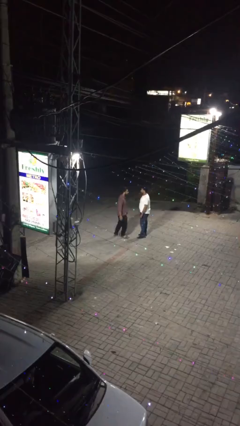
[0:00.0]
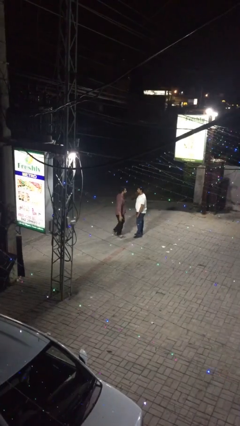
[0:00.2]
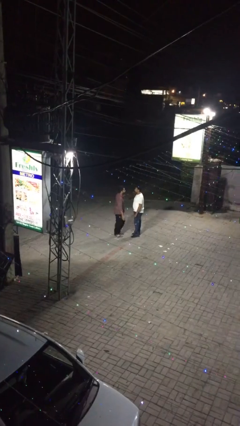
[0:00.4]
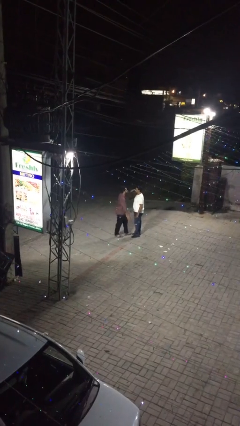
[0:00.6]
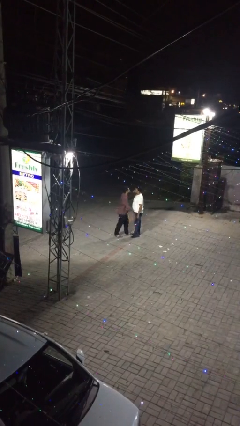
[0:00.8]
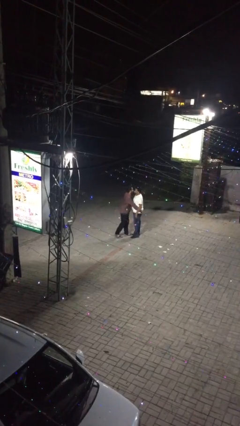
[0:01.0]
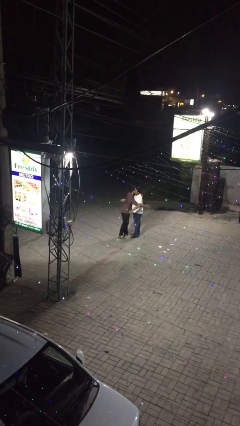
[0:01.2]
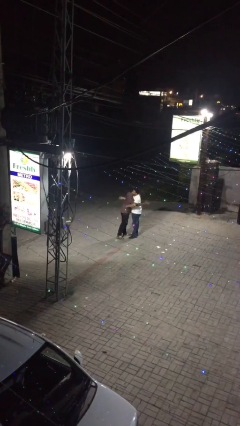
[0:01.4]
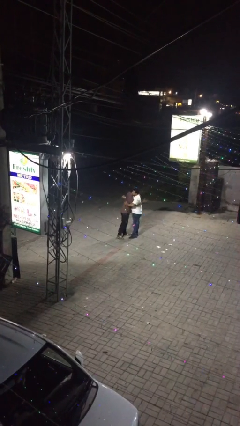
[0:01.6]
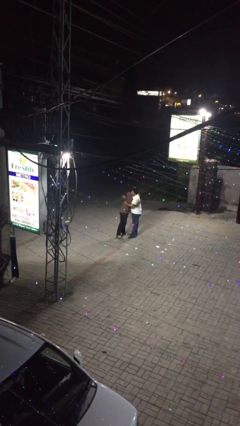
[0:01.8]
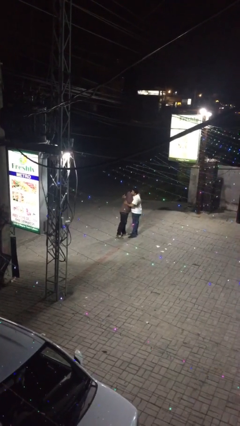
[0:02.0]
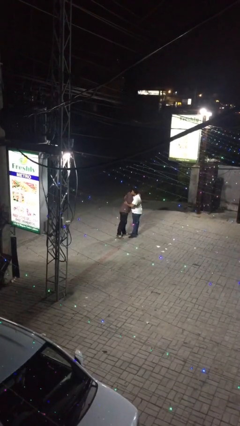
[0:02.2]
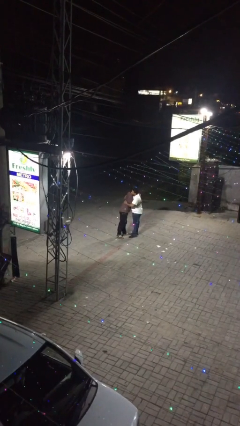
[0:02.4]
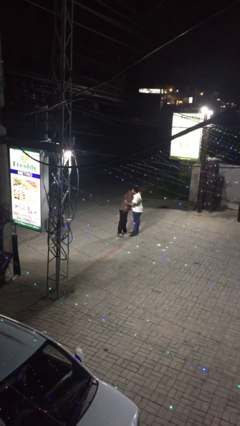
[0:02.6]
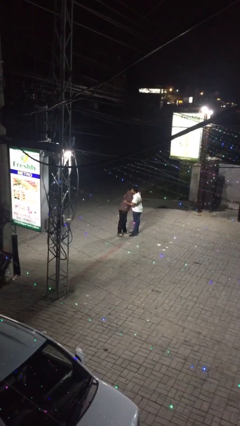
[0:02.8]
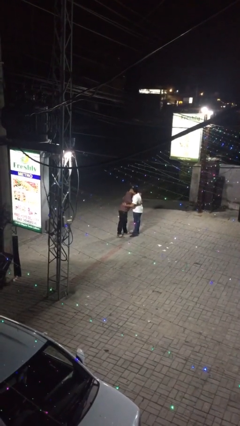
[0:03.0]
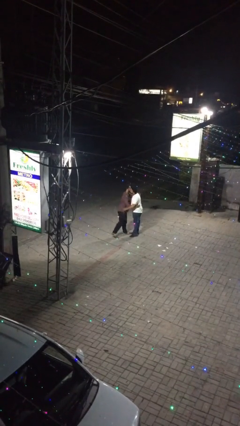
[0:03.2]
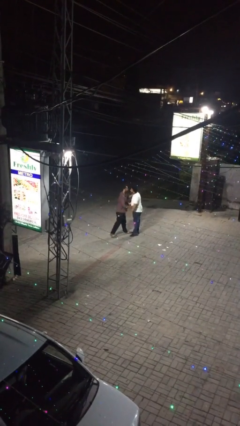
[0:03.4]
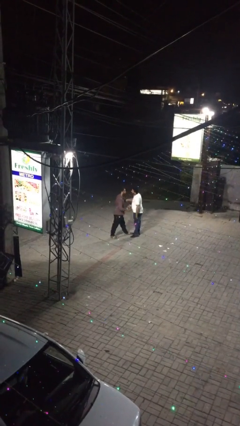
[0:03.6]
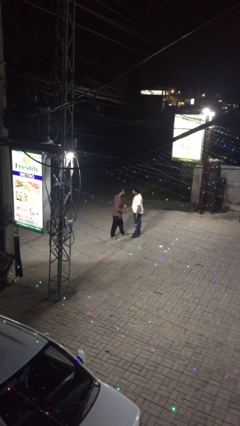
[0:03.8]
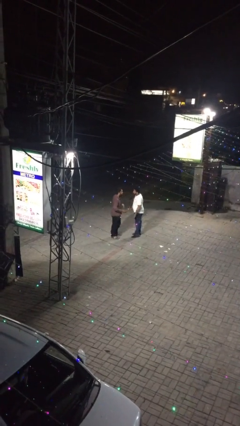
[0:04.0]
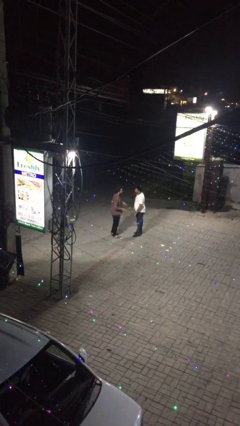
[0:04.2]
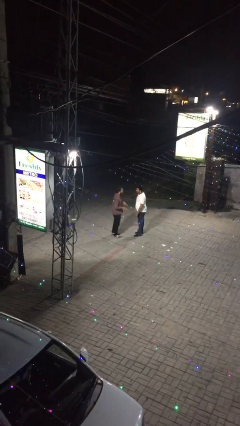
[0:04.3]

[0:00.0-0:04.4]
person embraces person

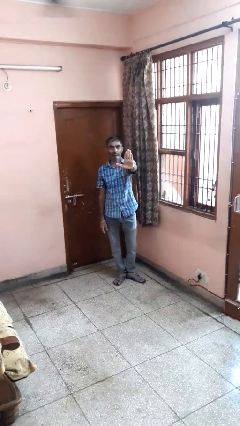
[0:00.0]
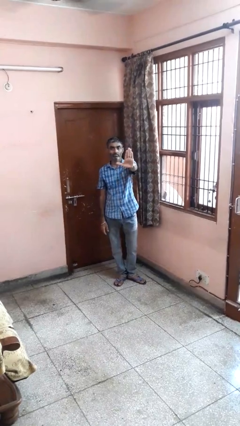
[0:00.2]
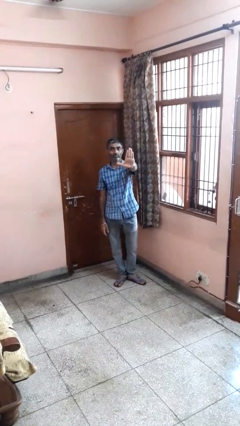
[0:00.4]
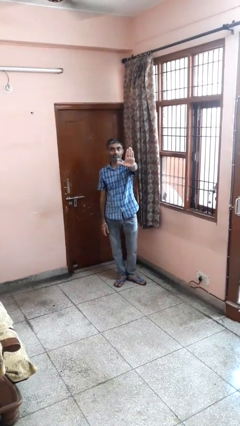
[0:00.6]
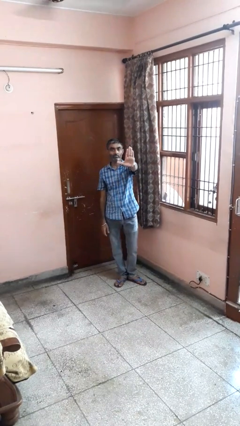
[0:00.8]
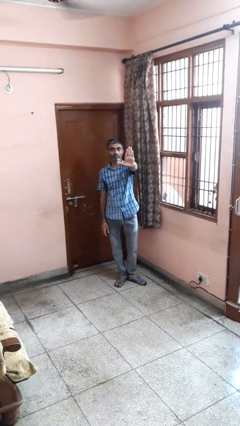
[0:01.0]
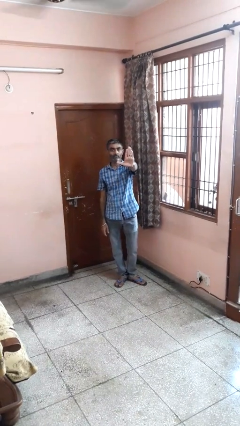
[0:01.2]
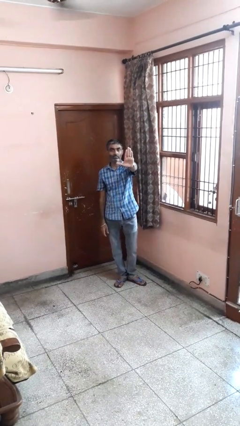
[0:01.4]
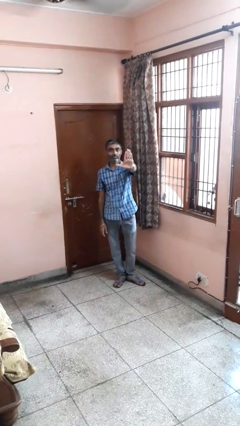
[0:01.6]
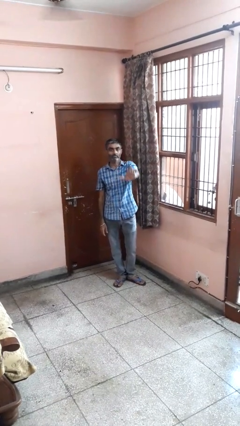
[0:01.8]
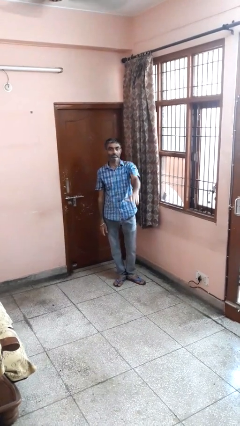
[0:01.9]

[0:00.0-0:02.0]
person gestures stop

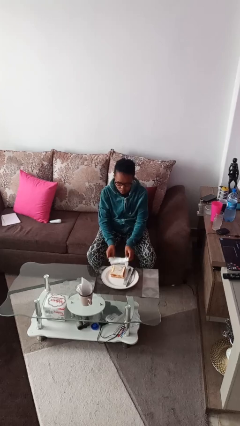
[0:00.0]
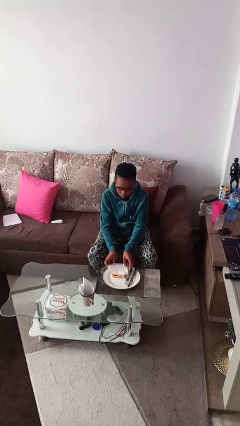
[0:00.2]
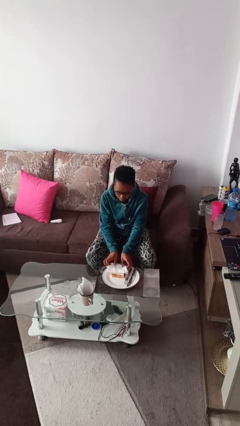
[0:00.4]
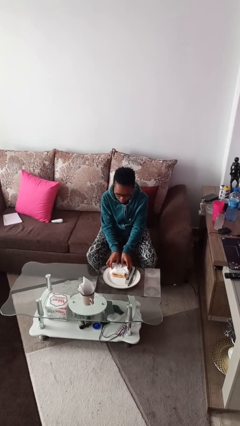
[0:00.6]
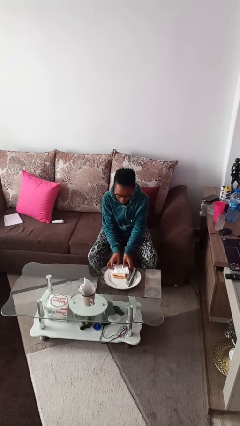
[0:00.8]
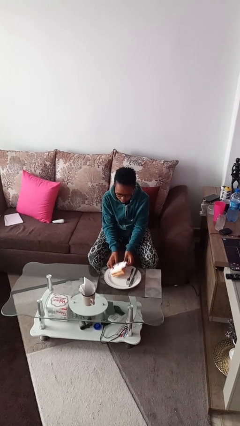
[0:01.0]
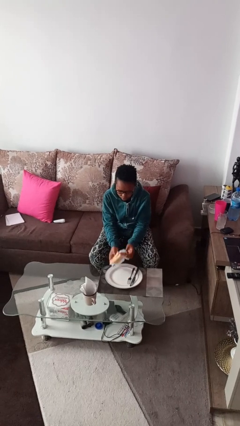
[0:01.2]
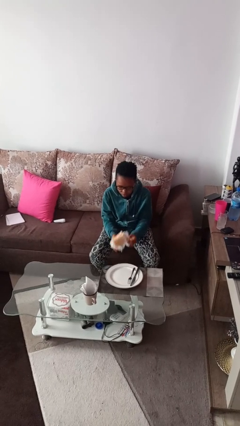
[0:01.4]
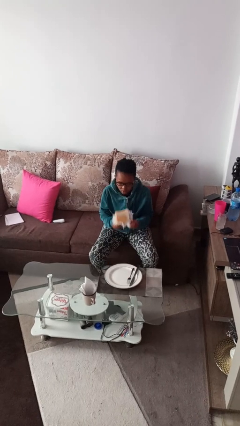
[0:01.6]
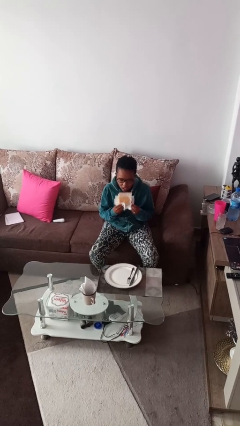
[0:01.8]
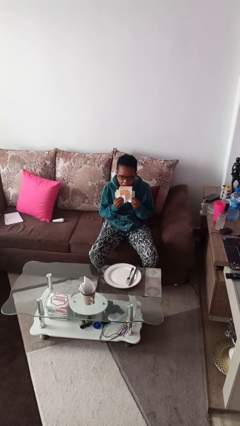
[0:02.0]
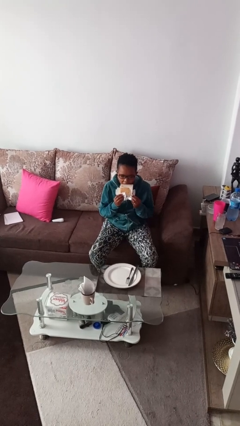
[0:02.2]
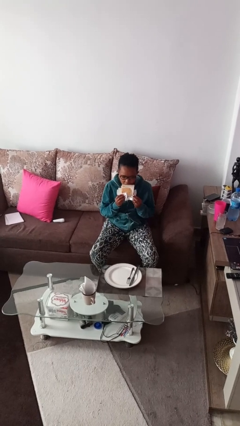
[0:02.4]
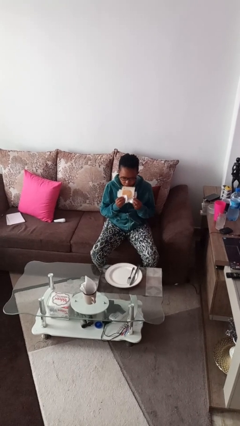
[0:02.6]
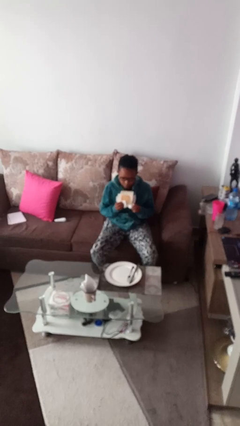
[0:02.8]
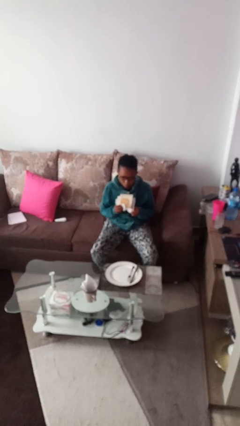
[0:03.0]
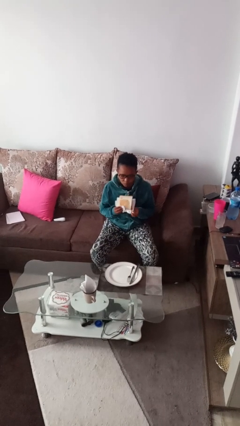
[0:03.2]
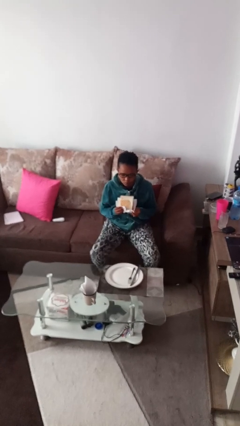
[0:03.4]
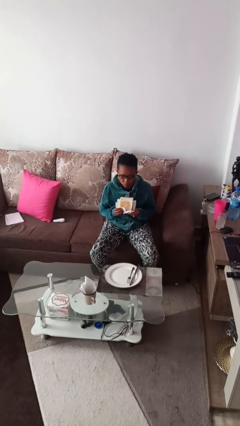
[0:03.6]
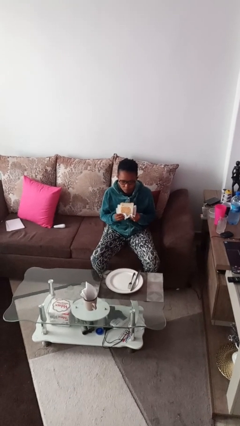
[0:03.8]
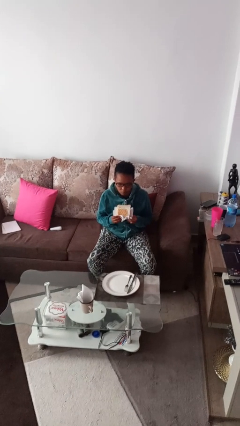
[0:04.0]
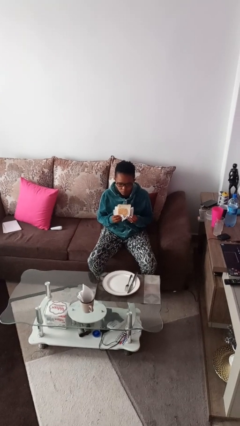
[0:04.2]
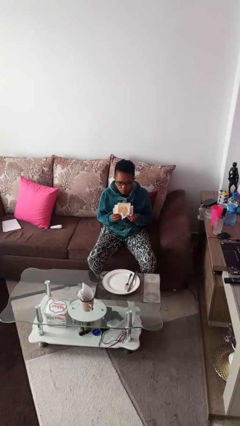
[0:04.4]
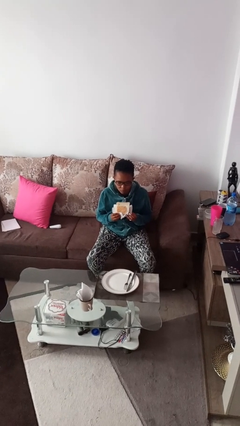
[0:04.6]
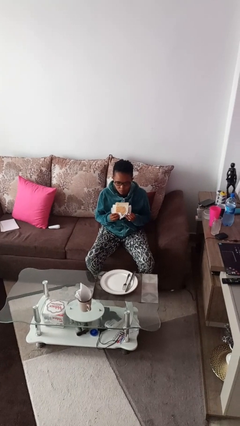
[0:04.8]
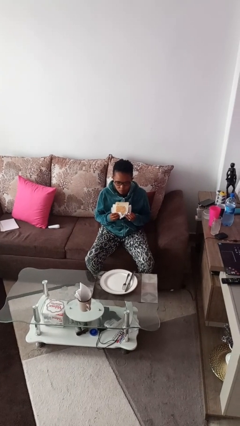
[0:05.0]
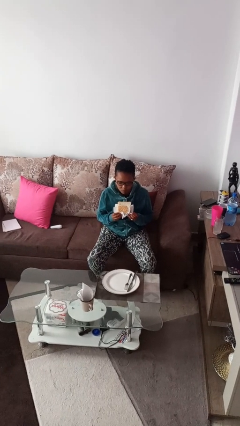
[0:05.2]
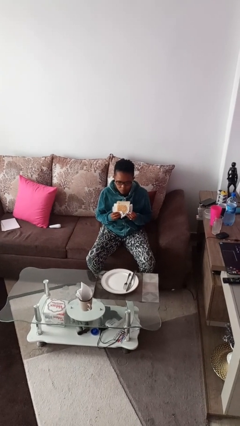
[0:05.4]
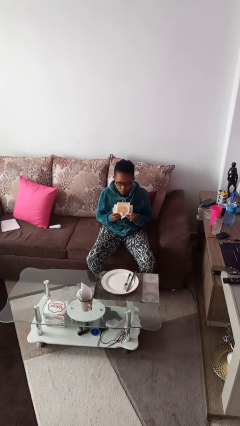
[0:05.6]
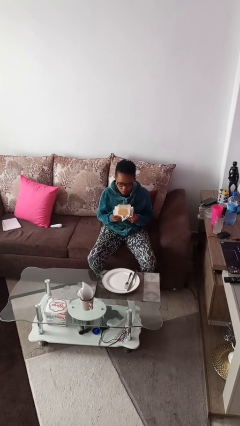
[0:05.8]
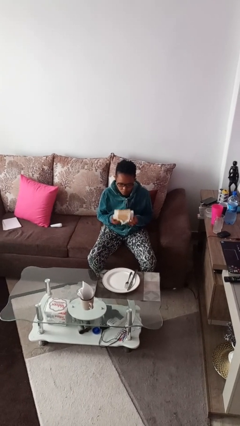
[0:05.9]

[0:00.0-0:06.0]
person eats with hands

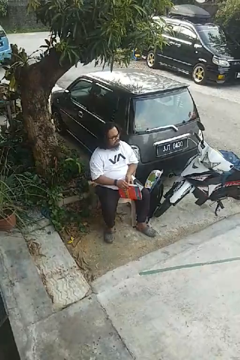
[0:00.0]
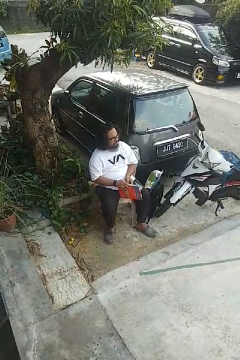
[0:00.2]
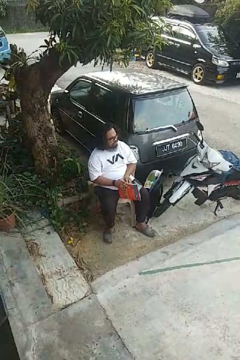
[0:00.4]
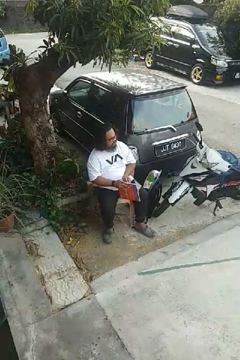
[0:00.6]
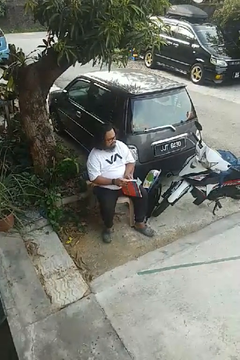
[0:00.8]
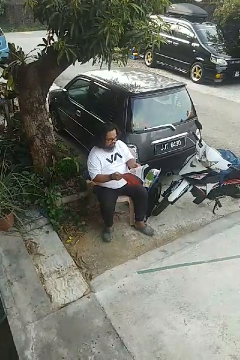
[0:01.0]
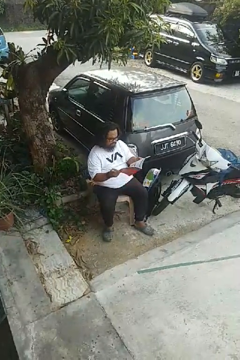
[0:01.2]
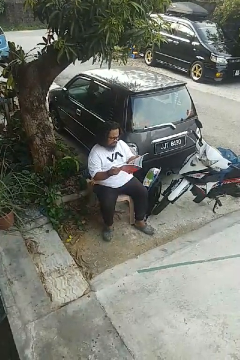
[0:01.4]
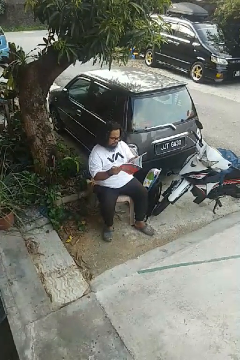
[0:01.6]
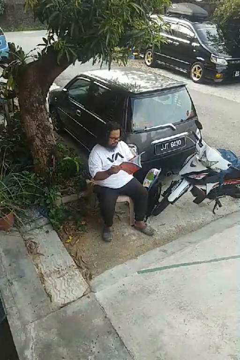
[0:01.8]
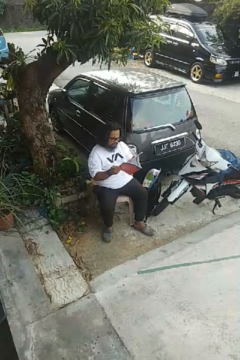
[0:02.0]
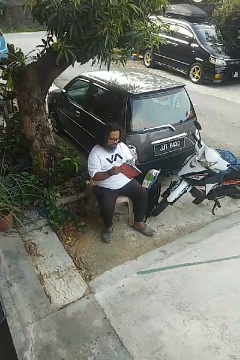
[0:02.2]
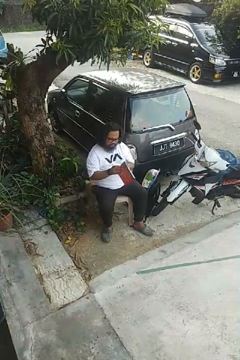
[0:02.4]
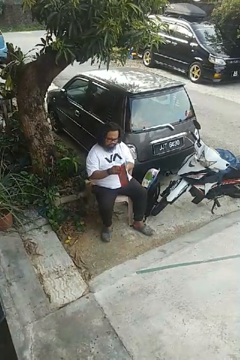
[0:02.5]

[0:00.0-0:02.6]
person reads magazine

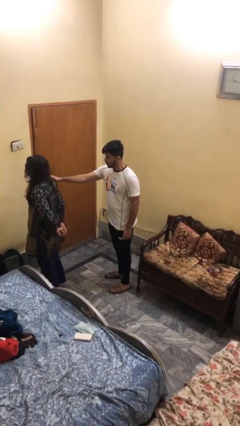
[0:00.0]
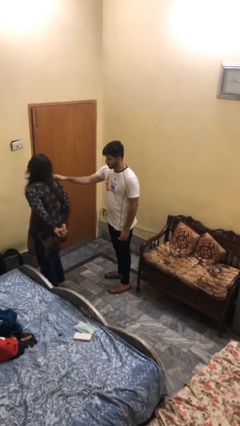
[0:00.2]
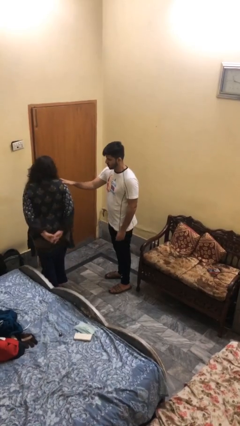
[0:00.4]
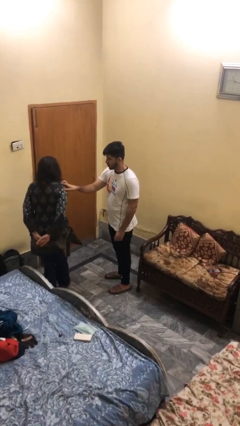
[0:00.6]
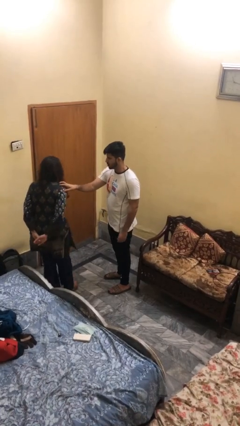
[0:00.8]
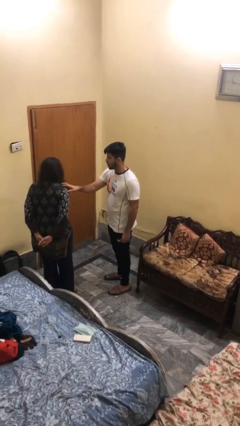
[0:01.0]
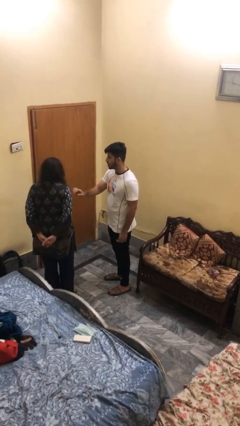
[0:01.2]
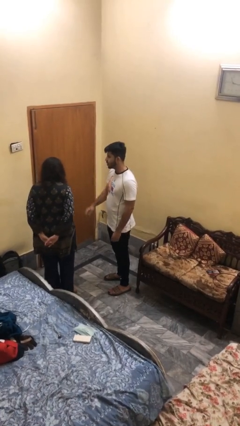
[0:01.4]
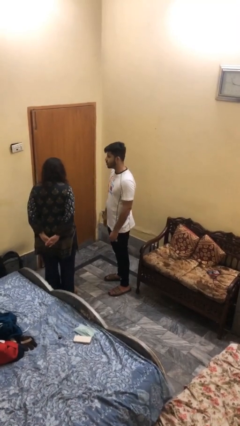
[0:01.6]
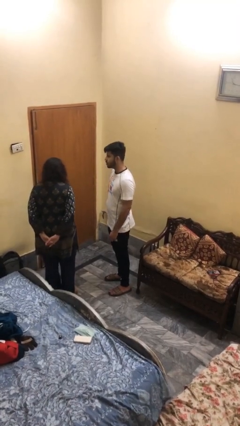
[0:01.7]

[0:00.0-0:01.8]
person spins person around

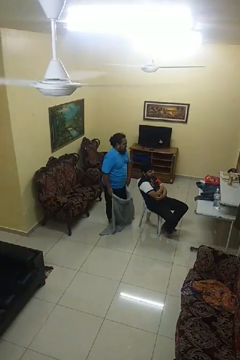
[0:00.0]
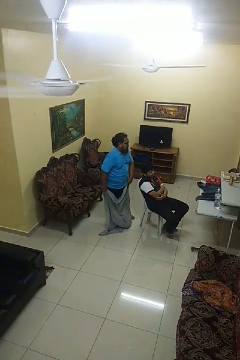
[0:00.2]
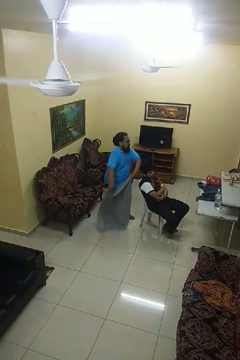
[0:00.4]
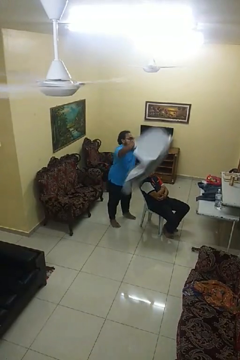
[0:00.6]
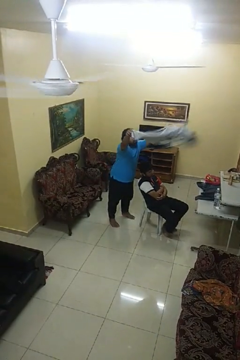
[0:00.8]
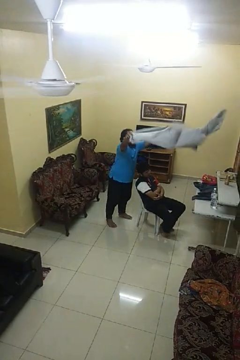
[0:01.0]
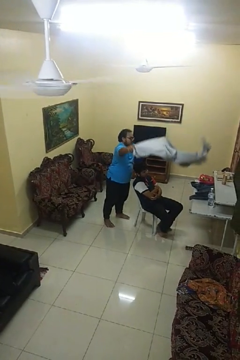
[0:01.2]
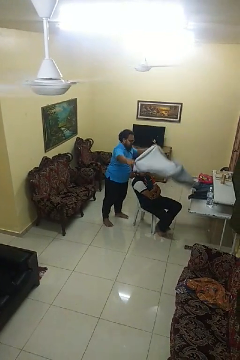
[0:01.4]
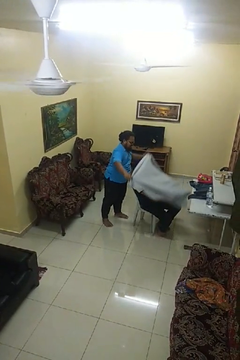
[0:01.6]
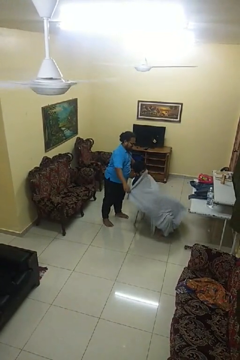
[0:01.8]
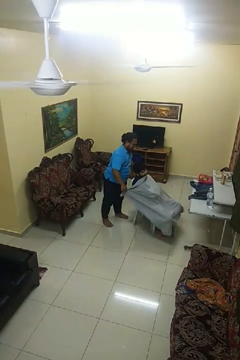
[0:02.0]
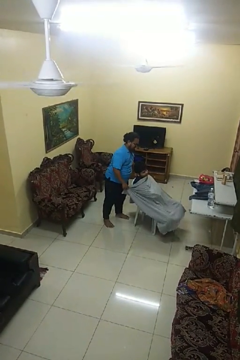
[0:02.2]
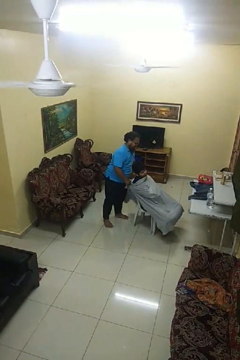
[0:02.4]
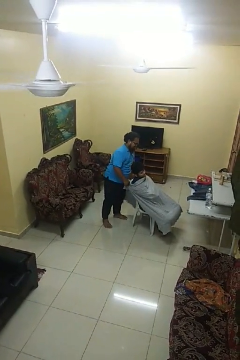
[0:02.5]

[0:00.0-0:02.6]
person covers friend with blanket
